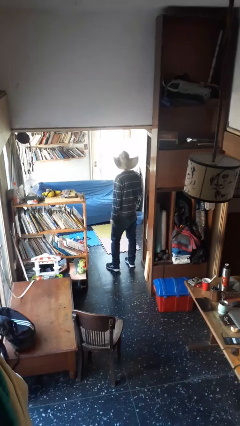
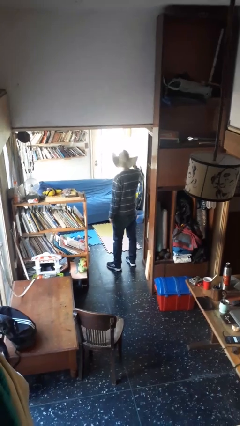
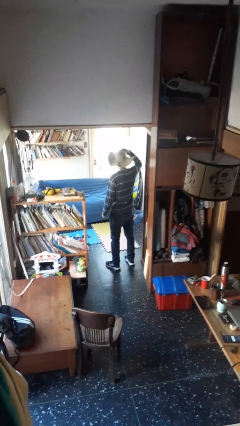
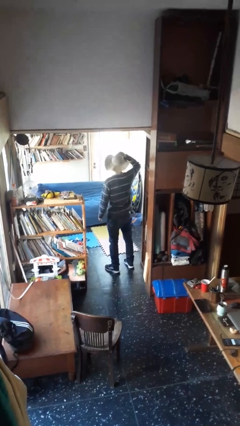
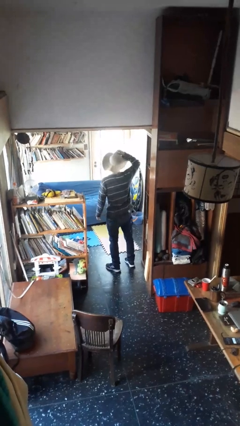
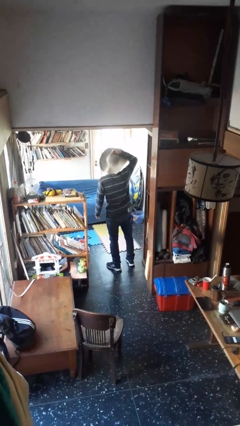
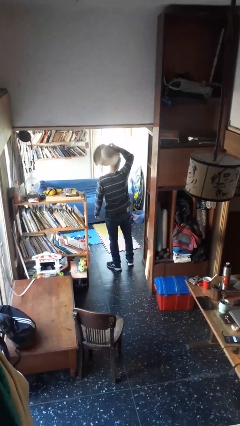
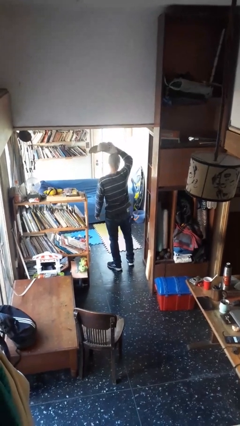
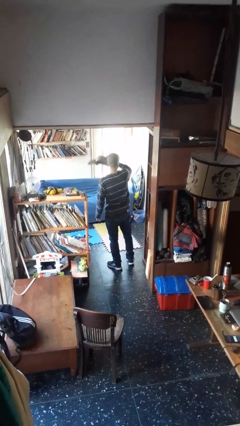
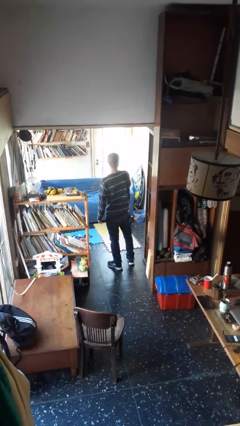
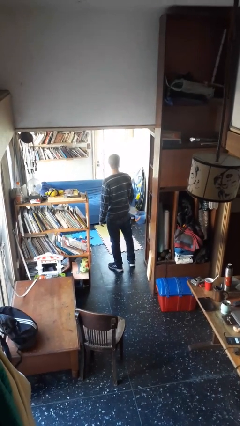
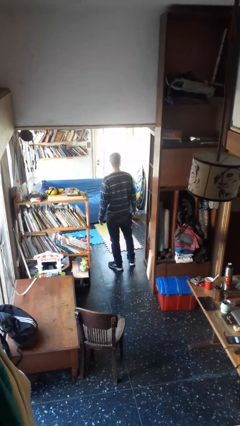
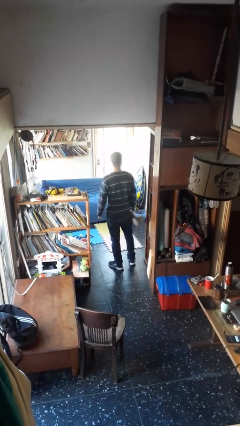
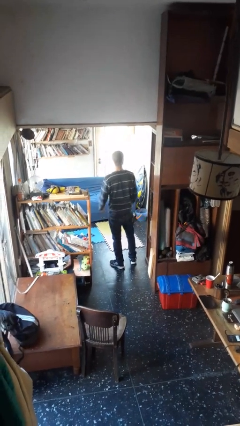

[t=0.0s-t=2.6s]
person takes off hat

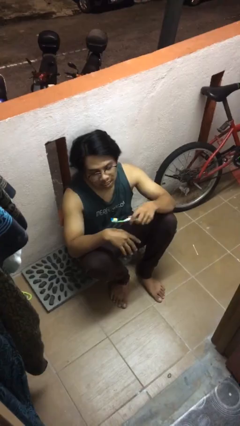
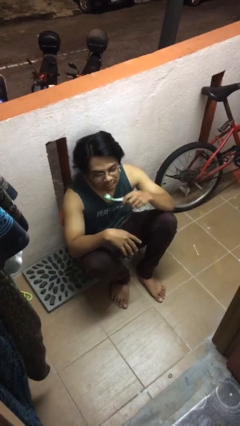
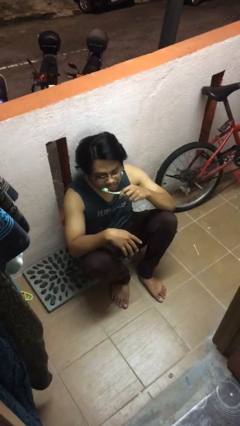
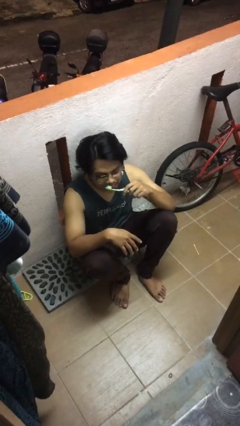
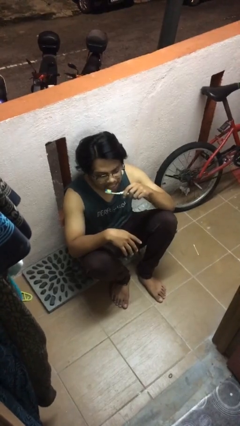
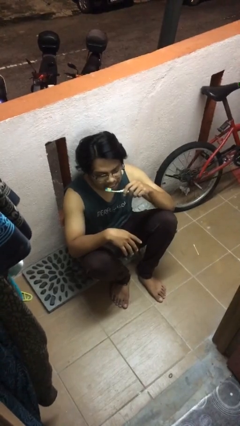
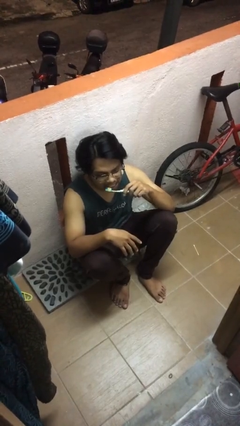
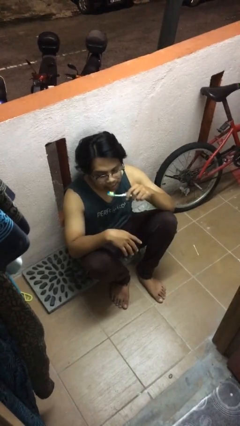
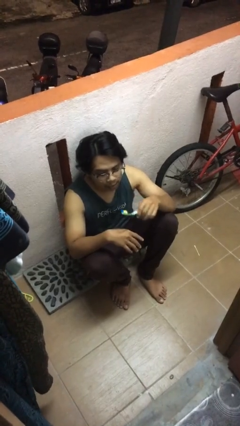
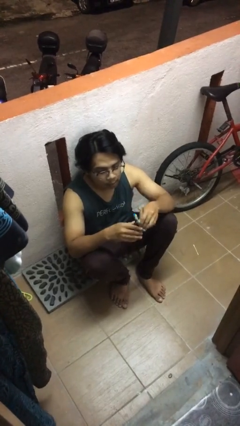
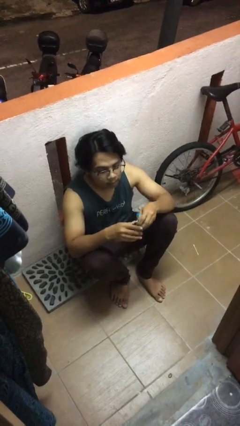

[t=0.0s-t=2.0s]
person brushes teeth

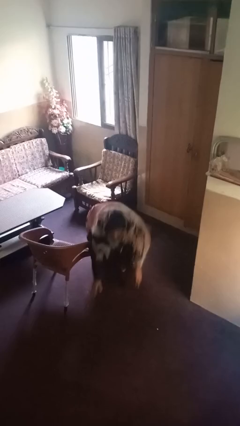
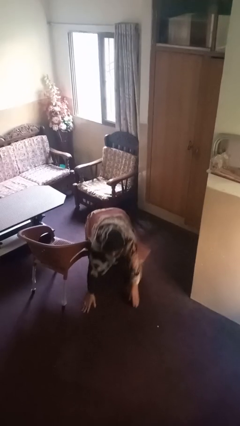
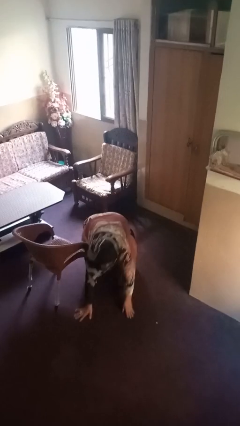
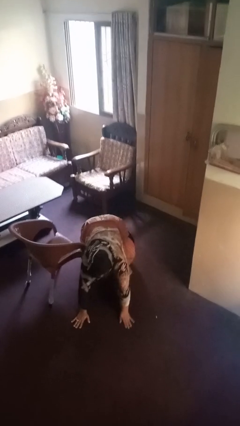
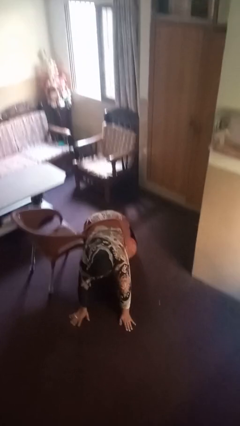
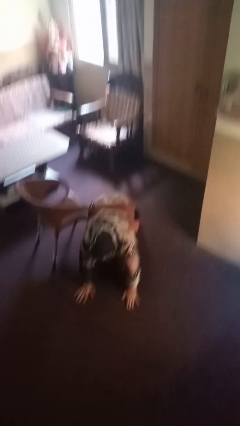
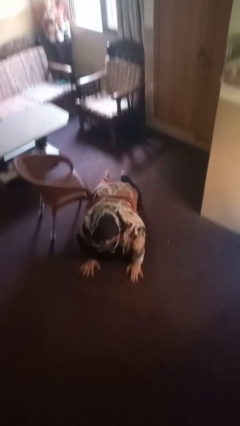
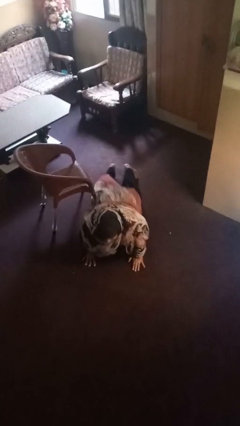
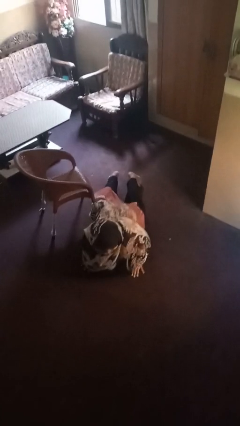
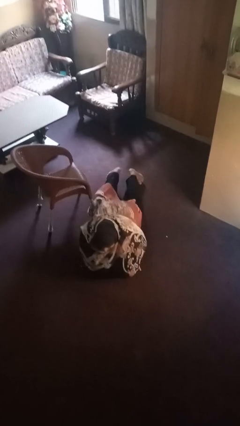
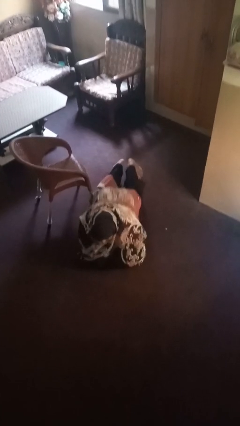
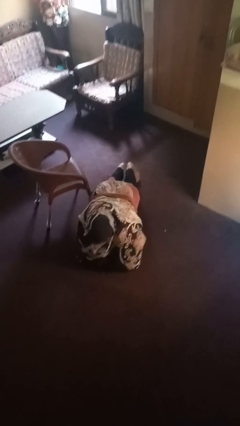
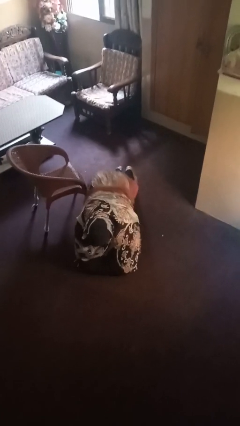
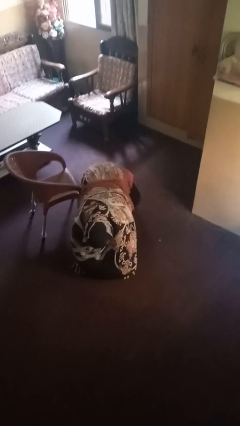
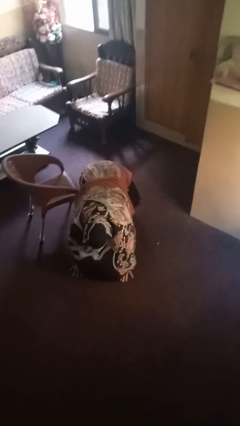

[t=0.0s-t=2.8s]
person lies down on floor

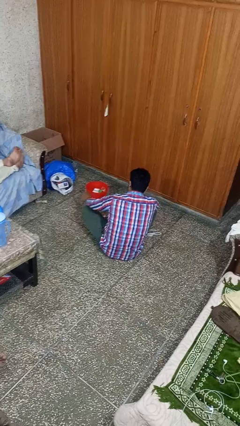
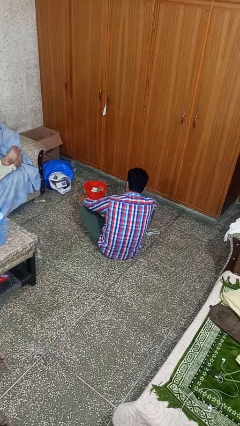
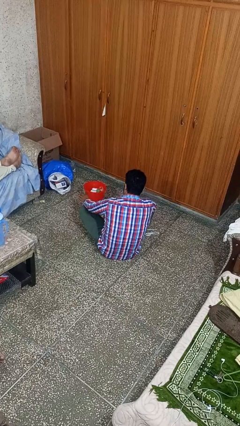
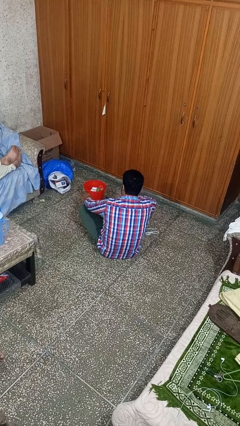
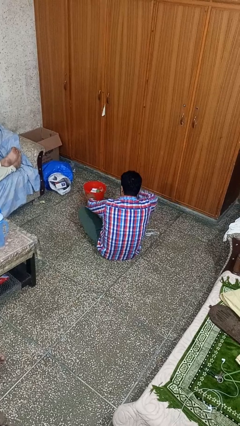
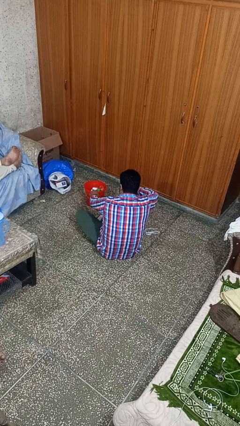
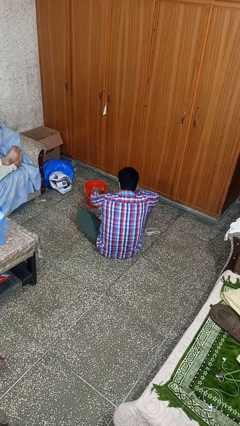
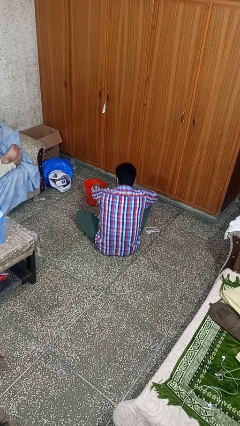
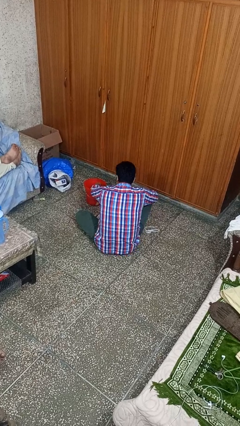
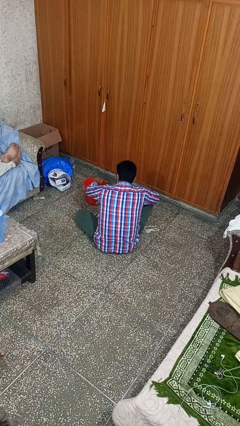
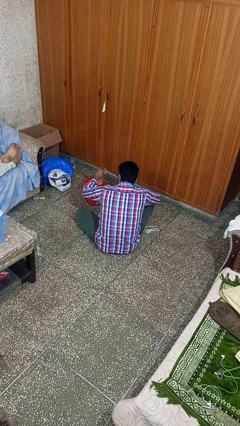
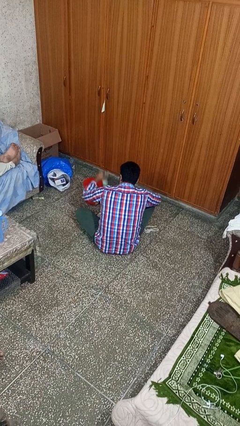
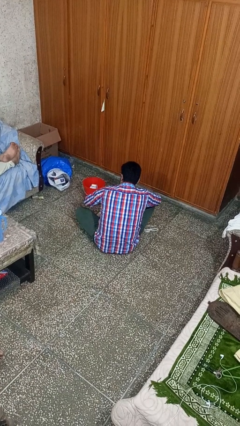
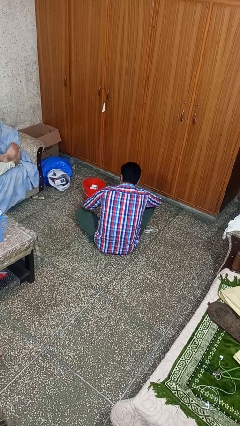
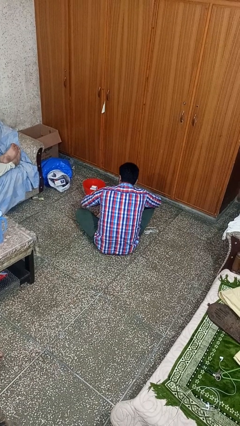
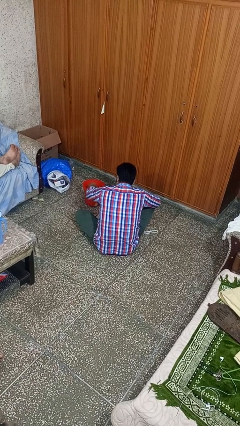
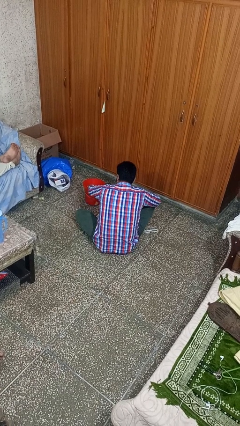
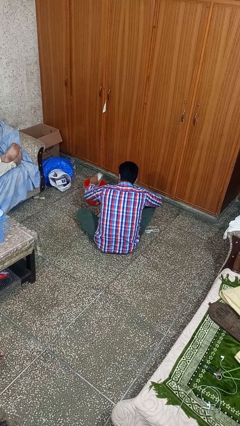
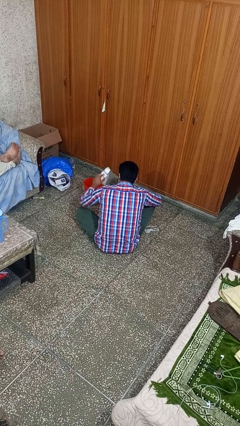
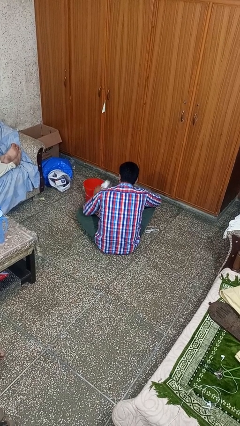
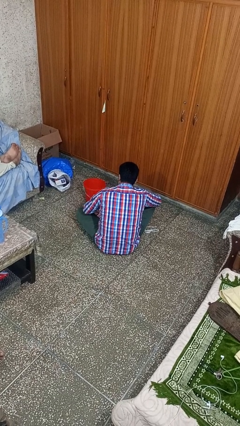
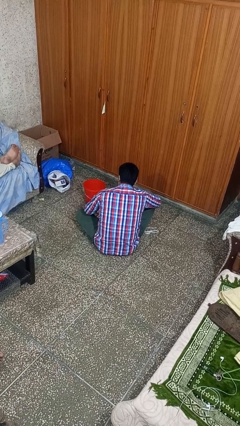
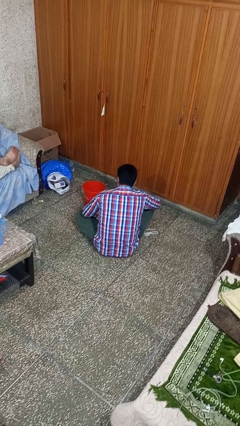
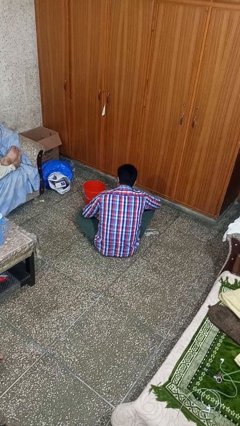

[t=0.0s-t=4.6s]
person takes object from basket

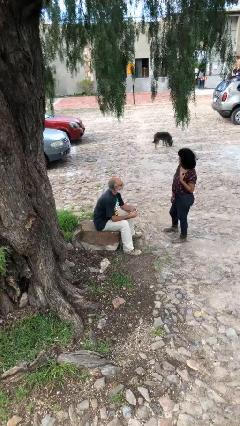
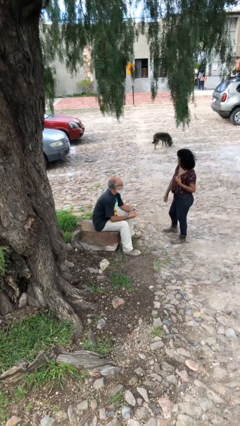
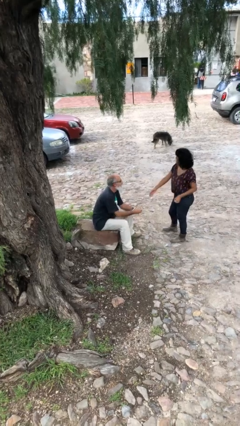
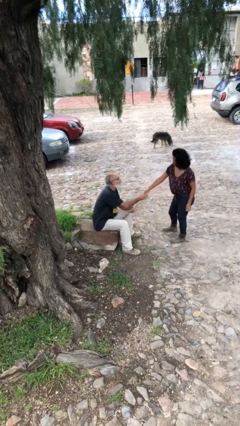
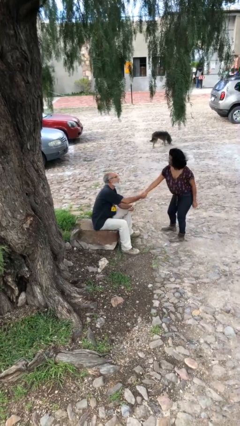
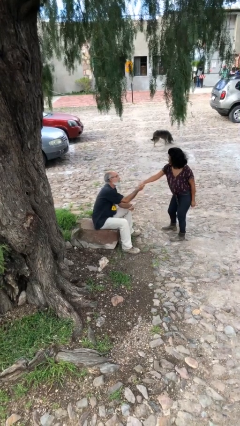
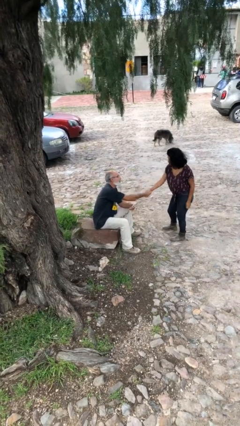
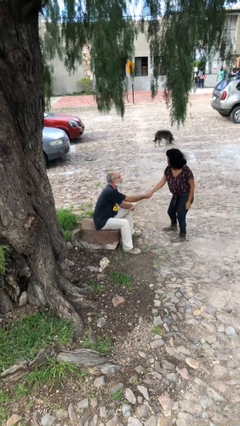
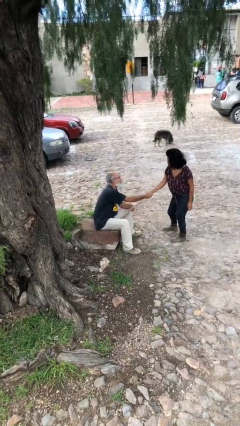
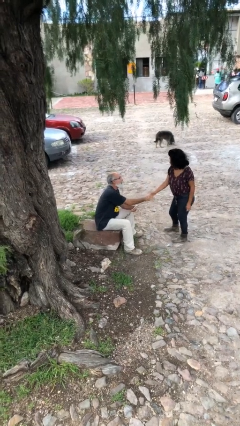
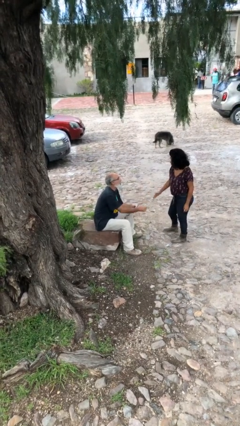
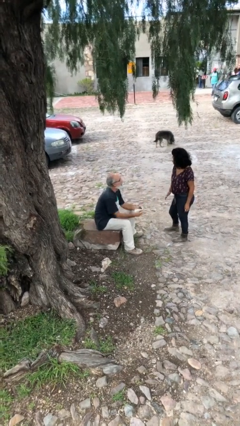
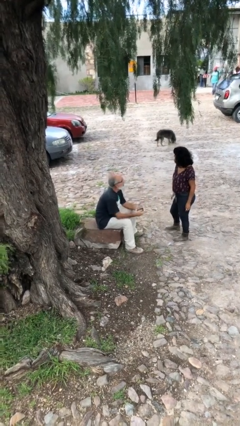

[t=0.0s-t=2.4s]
person shakes hand

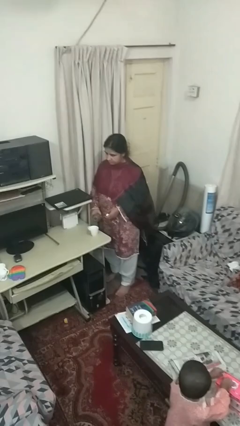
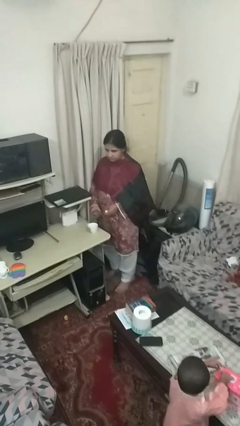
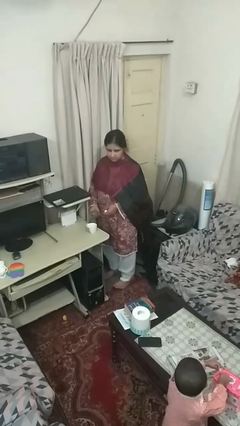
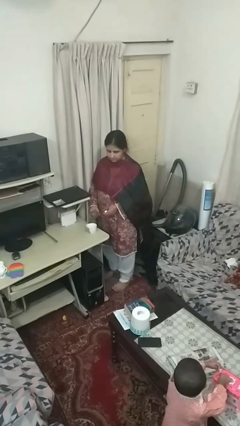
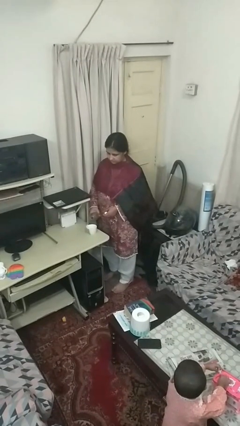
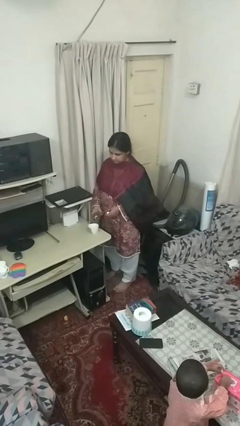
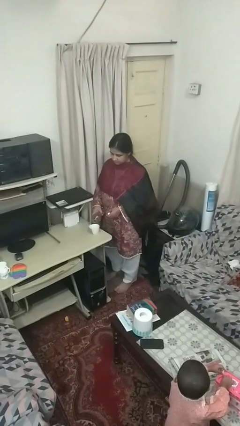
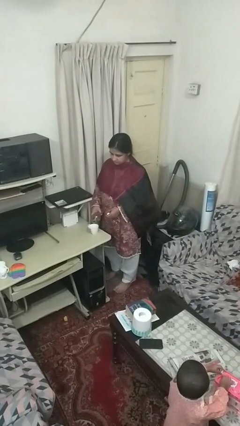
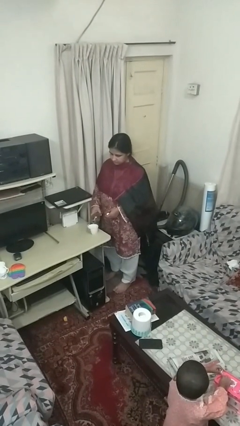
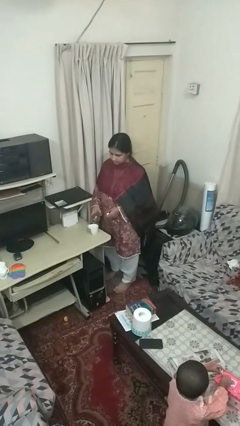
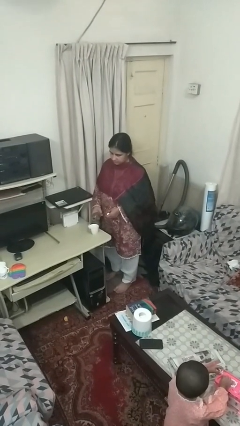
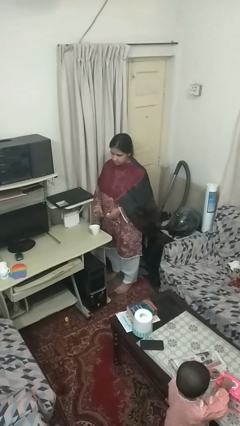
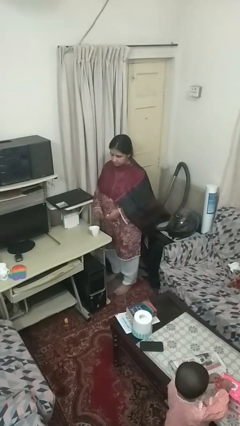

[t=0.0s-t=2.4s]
person pours liquid into cup

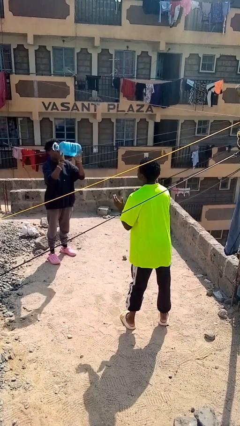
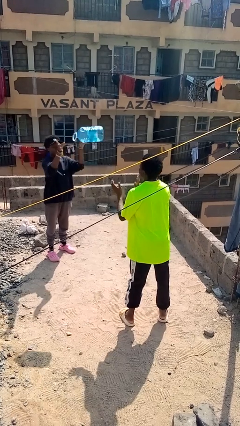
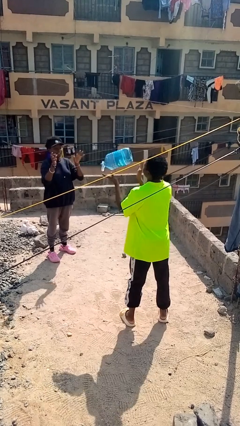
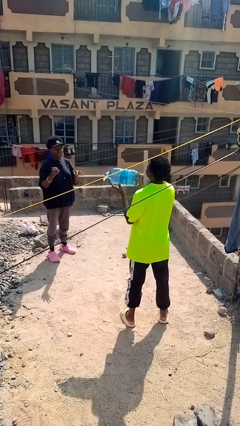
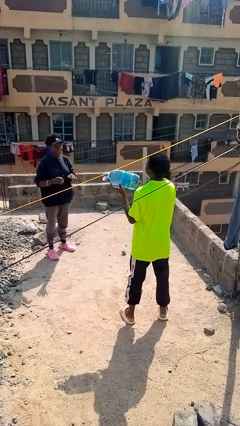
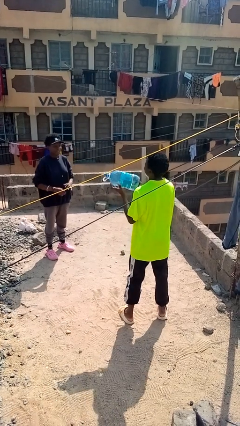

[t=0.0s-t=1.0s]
person catches object from person
